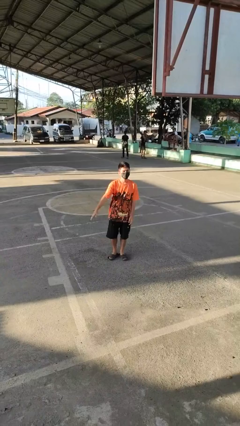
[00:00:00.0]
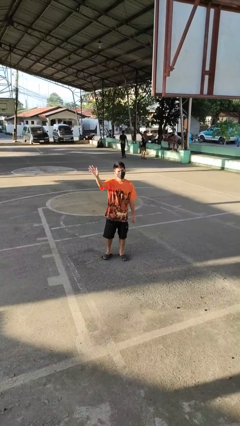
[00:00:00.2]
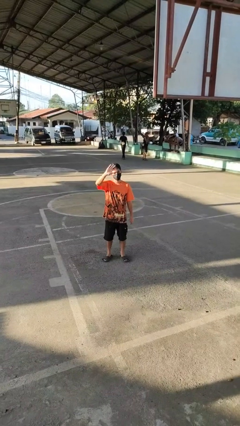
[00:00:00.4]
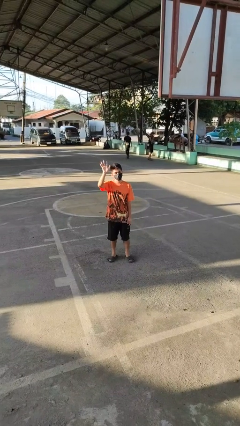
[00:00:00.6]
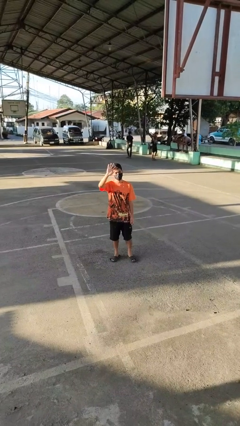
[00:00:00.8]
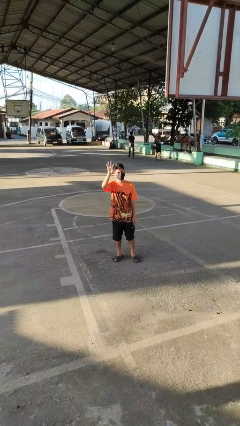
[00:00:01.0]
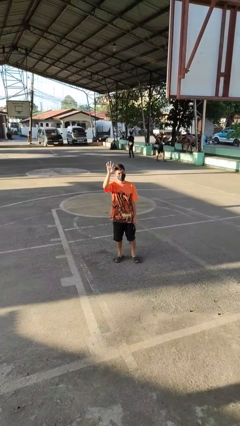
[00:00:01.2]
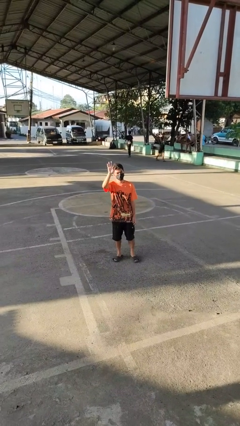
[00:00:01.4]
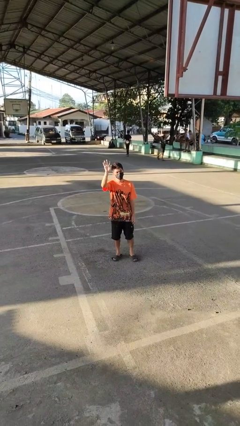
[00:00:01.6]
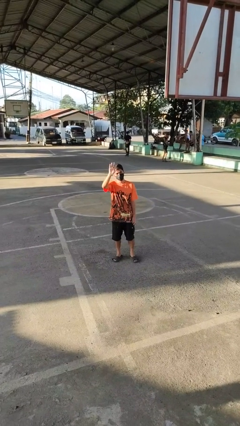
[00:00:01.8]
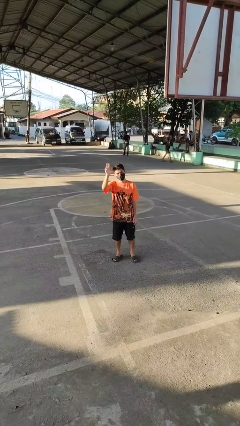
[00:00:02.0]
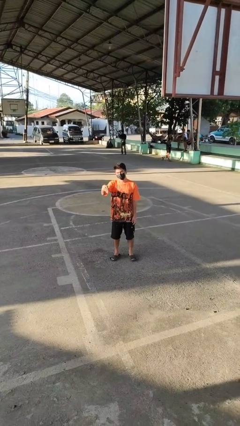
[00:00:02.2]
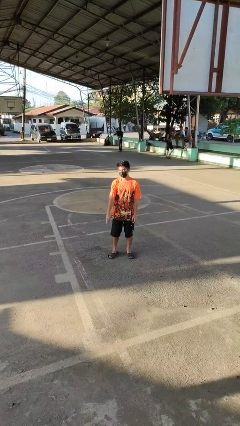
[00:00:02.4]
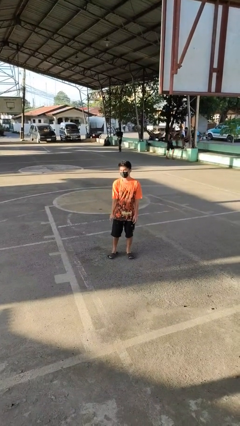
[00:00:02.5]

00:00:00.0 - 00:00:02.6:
person waves at person

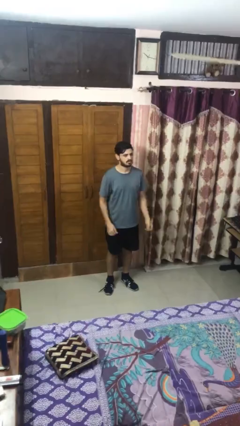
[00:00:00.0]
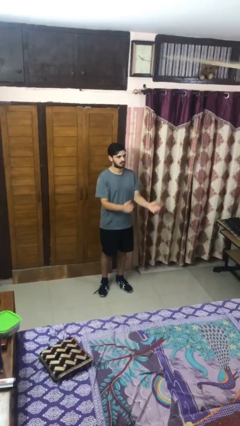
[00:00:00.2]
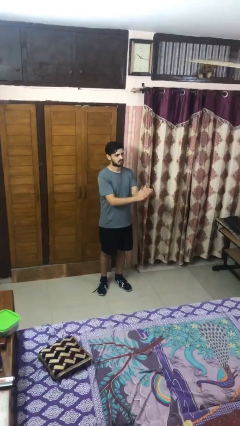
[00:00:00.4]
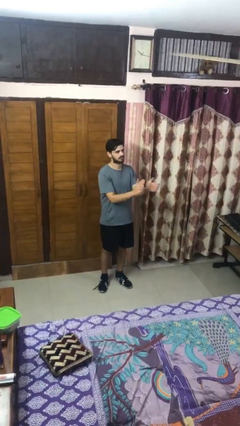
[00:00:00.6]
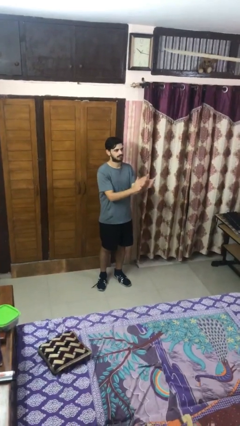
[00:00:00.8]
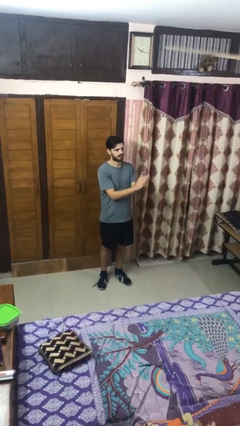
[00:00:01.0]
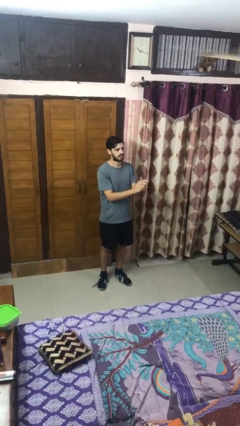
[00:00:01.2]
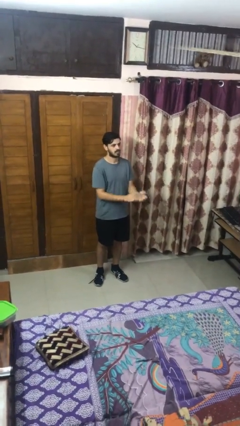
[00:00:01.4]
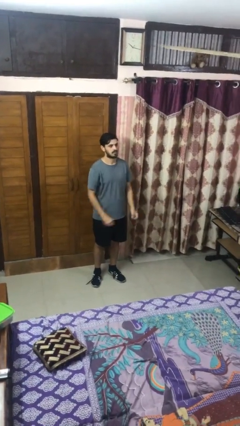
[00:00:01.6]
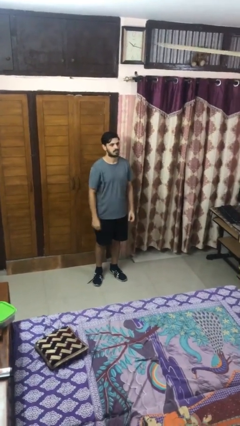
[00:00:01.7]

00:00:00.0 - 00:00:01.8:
person claps hands

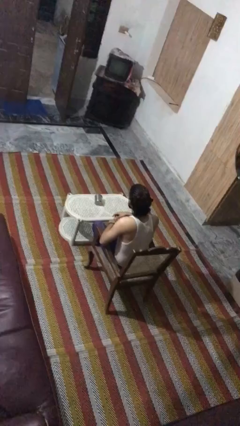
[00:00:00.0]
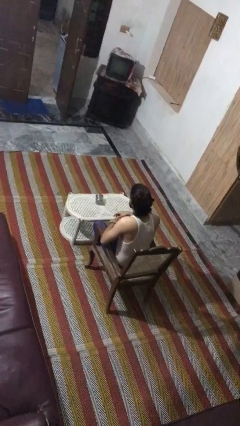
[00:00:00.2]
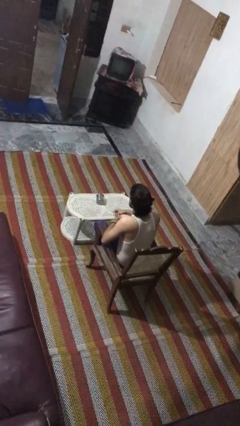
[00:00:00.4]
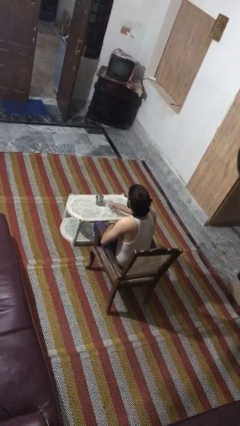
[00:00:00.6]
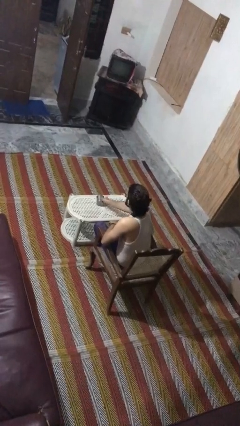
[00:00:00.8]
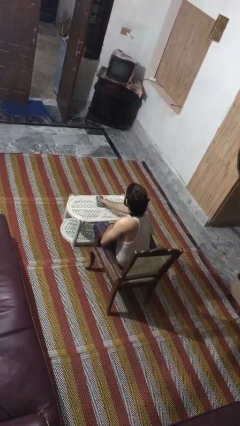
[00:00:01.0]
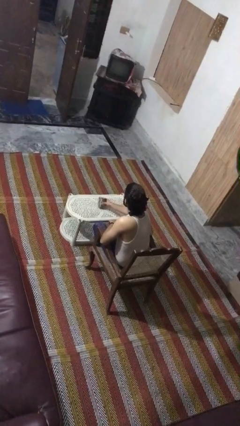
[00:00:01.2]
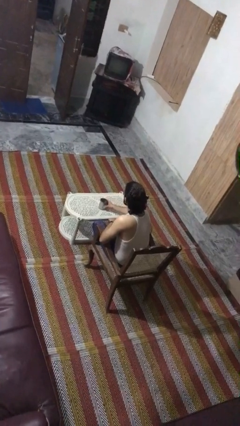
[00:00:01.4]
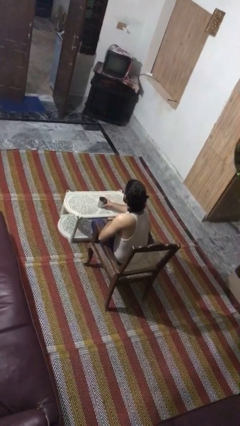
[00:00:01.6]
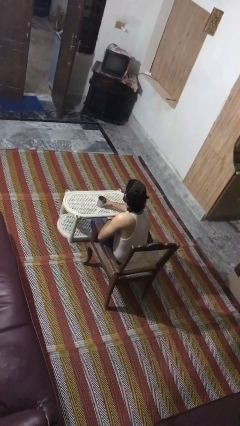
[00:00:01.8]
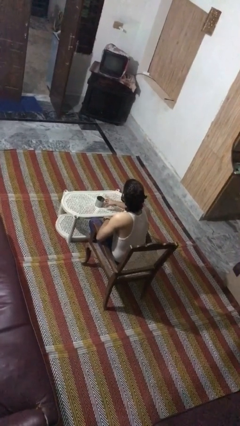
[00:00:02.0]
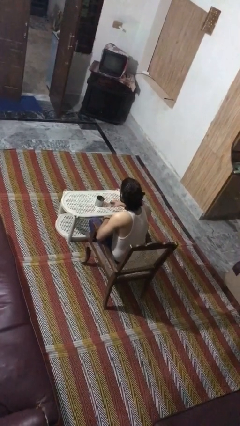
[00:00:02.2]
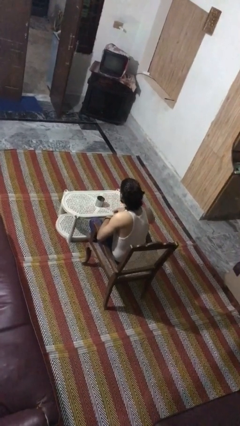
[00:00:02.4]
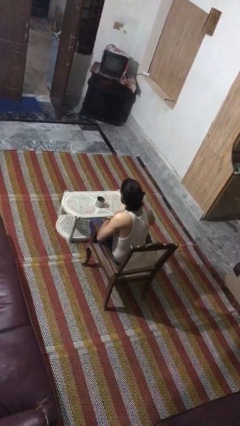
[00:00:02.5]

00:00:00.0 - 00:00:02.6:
person sets upright glass

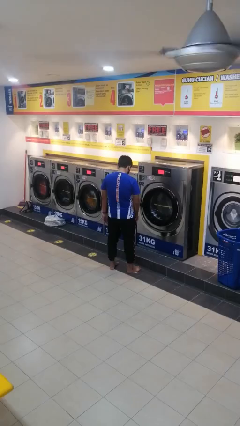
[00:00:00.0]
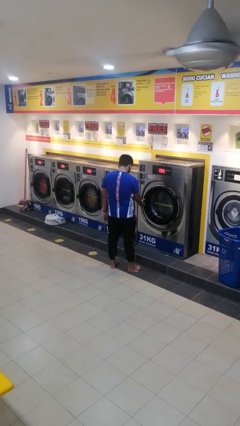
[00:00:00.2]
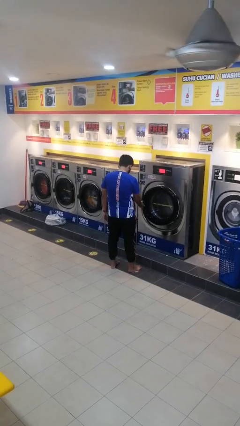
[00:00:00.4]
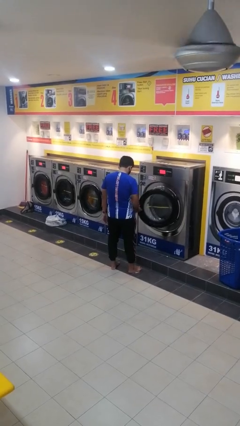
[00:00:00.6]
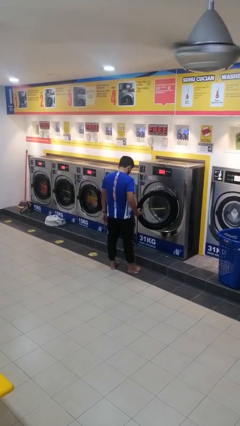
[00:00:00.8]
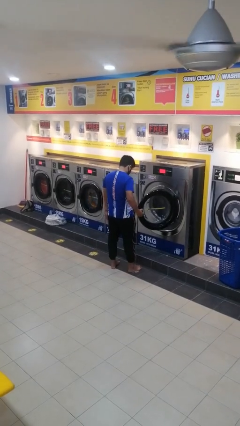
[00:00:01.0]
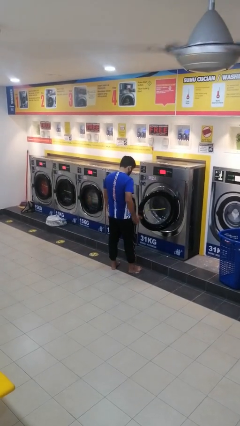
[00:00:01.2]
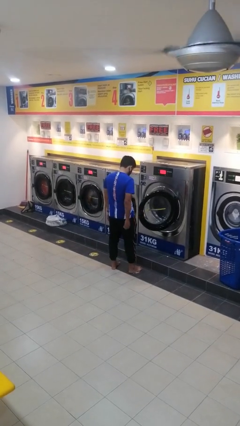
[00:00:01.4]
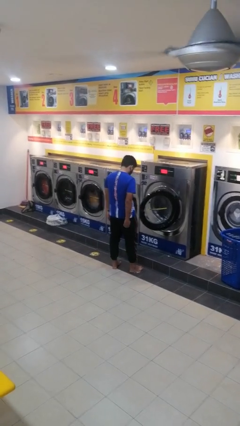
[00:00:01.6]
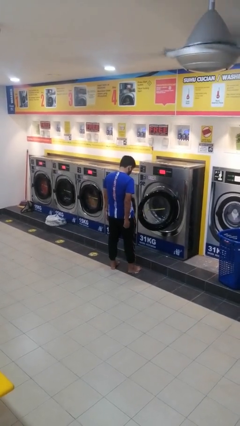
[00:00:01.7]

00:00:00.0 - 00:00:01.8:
person opens clothes washer

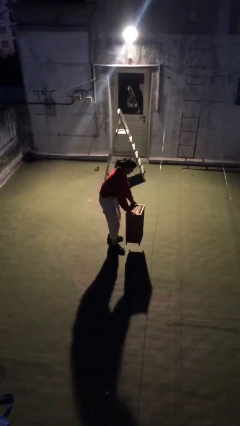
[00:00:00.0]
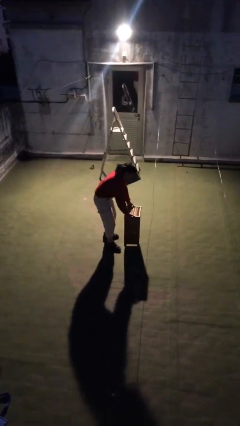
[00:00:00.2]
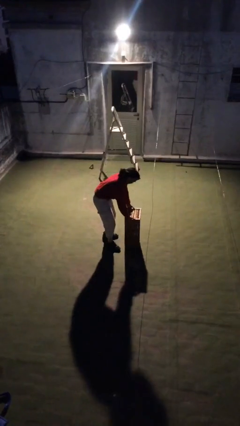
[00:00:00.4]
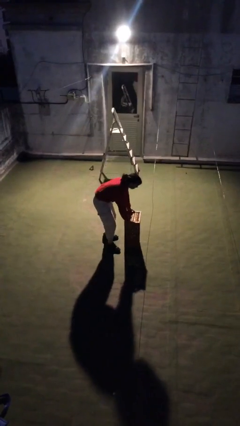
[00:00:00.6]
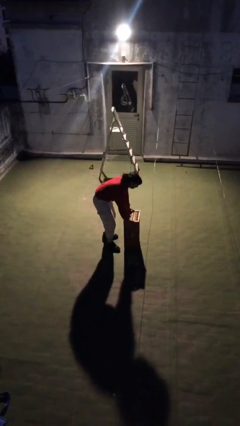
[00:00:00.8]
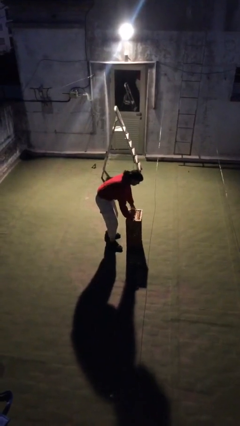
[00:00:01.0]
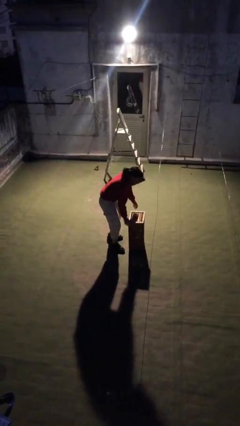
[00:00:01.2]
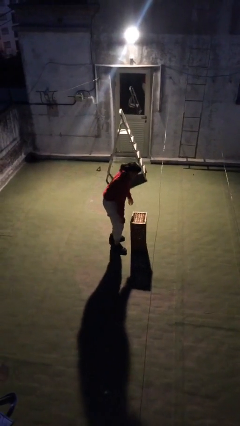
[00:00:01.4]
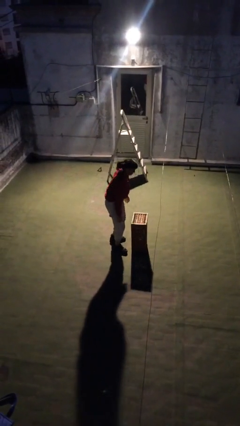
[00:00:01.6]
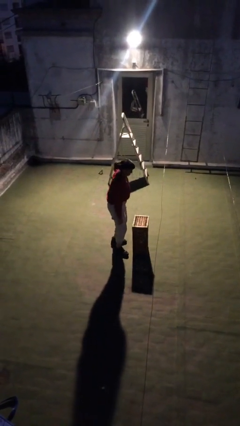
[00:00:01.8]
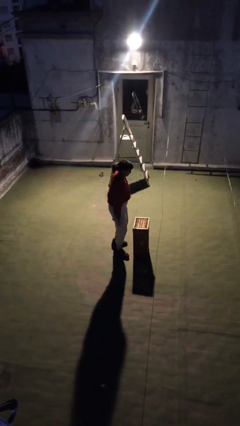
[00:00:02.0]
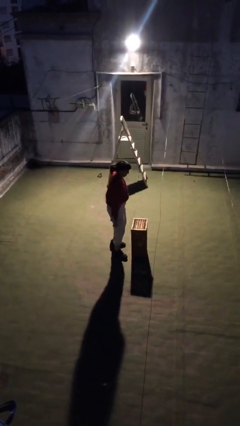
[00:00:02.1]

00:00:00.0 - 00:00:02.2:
person puts down object on floor

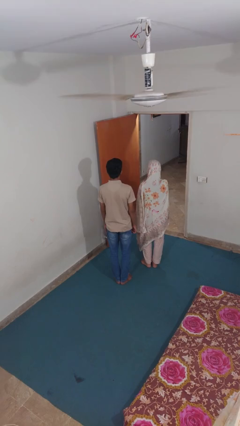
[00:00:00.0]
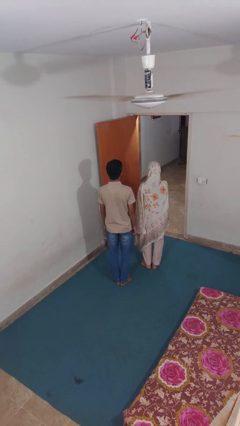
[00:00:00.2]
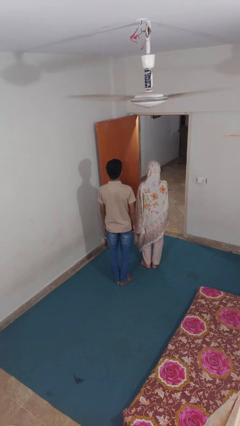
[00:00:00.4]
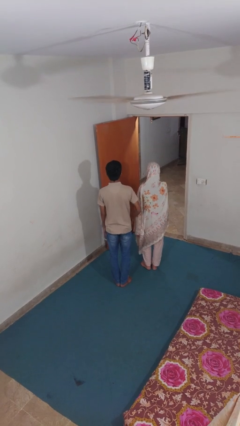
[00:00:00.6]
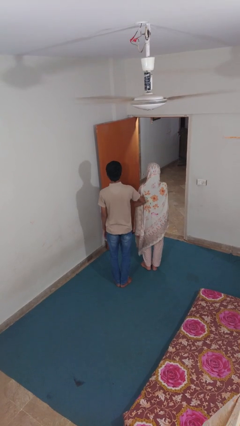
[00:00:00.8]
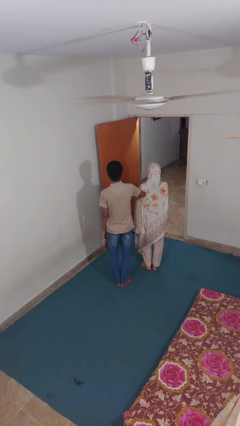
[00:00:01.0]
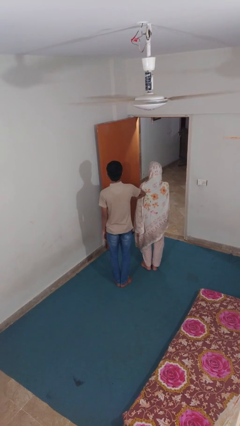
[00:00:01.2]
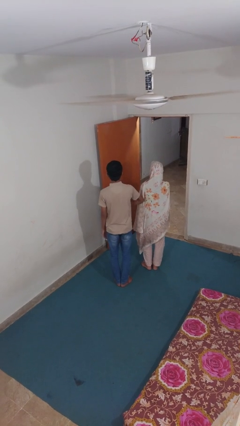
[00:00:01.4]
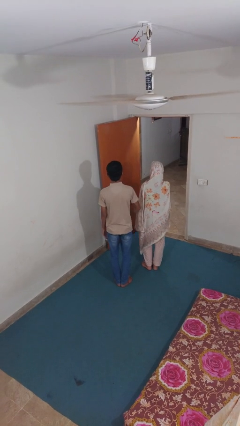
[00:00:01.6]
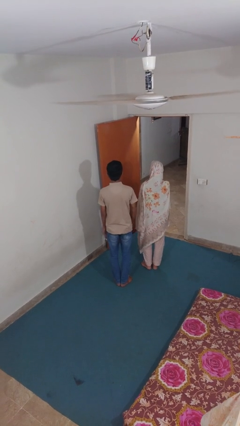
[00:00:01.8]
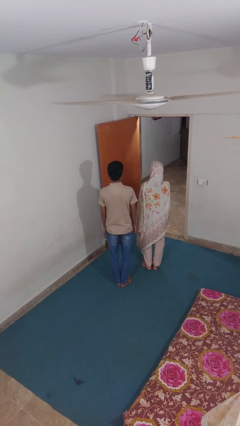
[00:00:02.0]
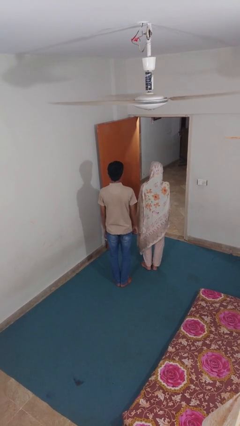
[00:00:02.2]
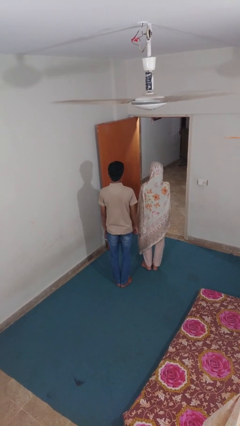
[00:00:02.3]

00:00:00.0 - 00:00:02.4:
person nudges person with elbow

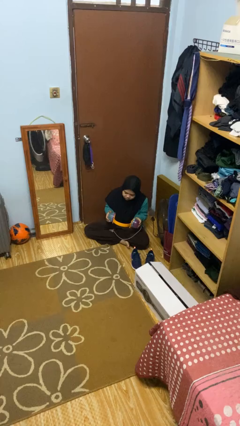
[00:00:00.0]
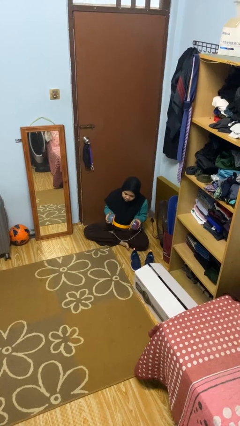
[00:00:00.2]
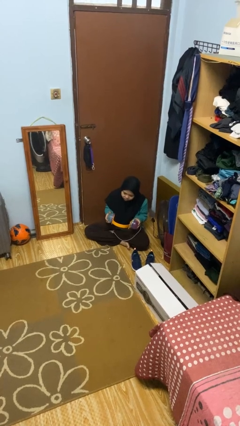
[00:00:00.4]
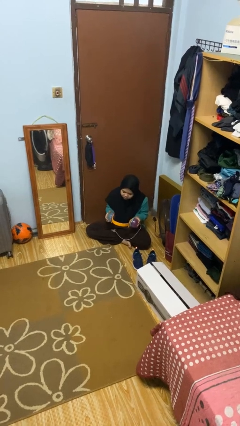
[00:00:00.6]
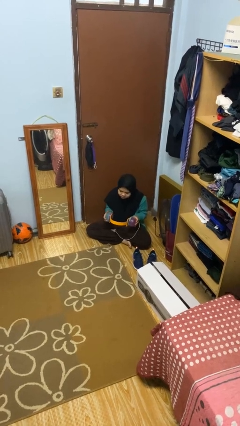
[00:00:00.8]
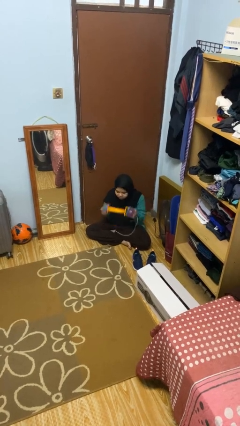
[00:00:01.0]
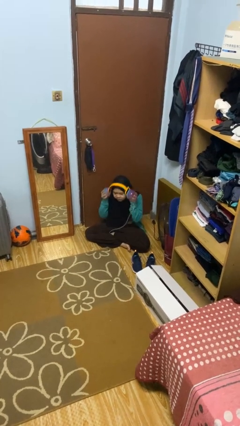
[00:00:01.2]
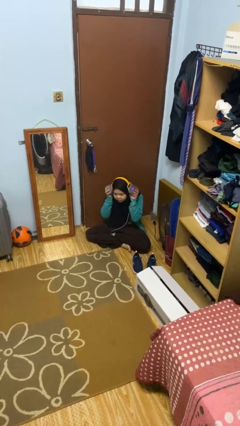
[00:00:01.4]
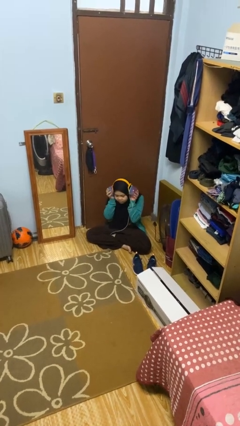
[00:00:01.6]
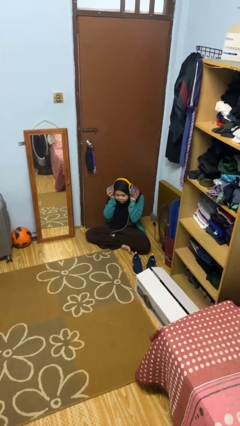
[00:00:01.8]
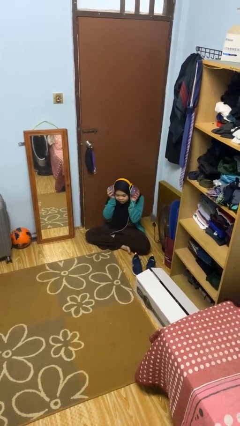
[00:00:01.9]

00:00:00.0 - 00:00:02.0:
person puts on headphones

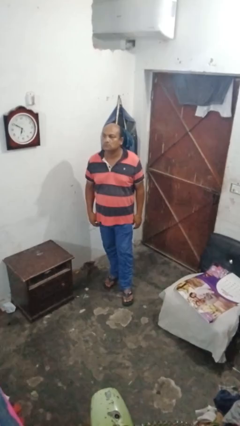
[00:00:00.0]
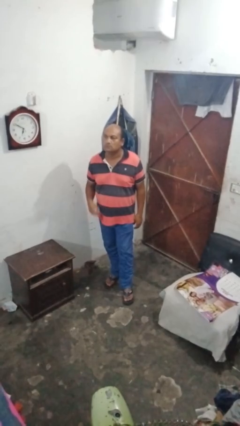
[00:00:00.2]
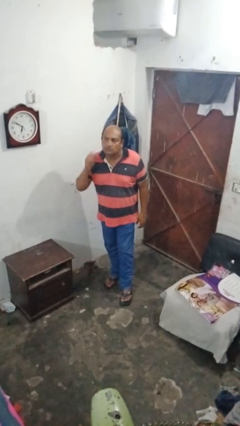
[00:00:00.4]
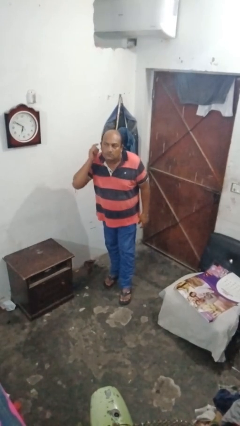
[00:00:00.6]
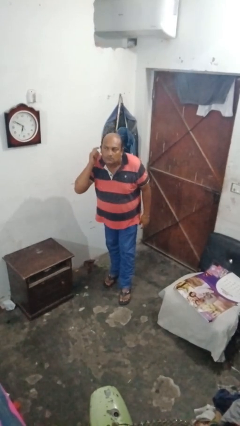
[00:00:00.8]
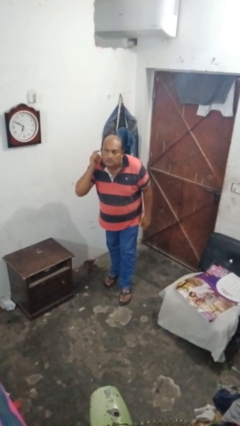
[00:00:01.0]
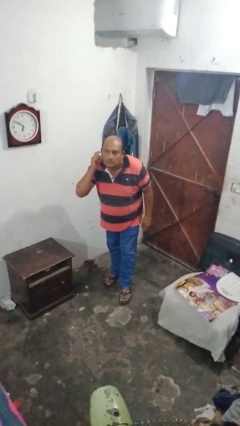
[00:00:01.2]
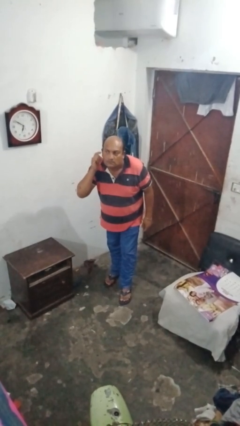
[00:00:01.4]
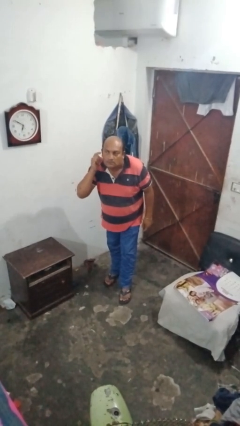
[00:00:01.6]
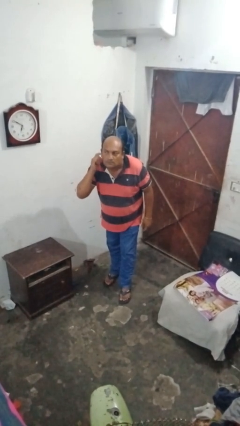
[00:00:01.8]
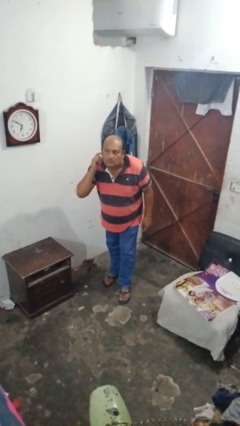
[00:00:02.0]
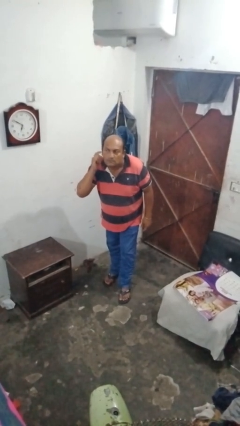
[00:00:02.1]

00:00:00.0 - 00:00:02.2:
person gestures be quiet
